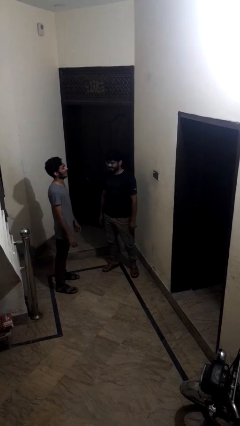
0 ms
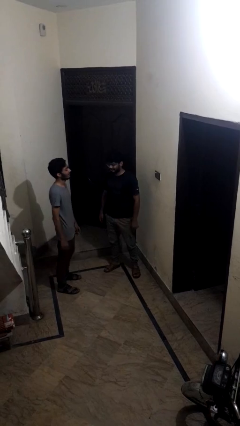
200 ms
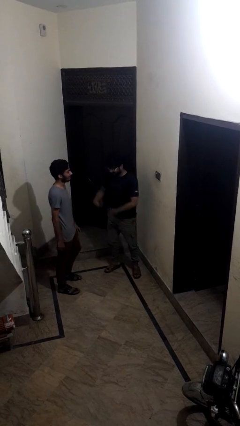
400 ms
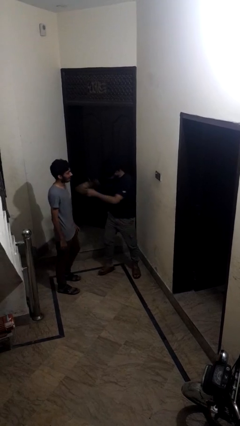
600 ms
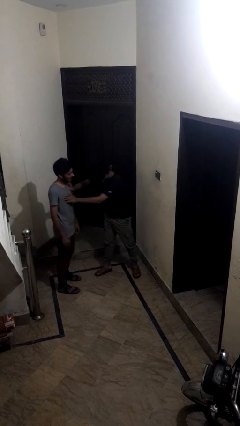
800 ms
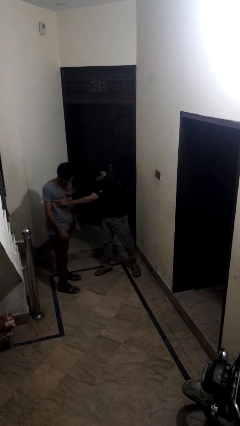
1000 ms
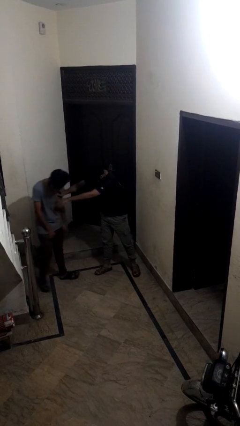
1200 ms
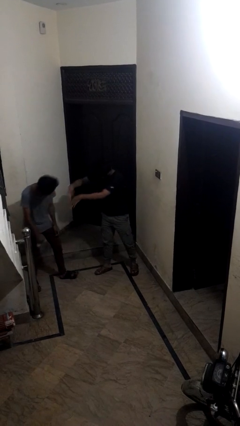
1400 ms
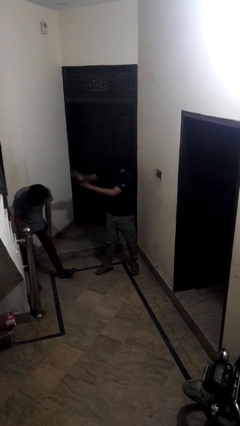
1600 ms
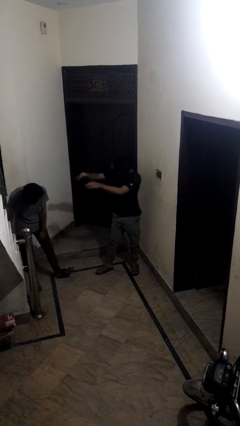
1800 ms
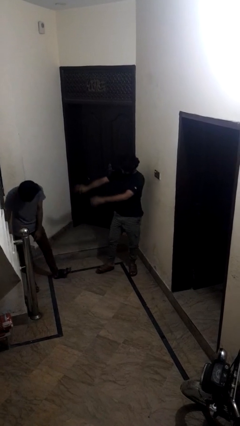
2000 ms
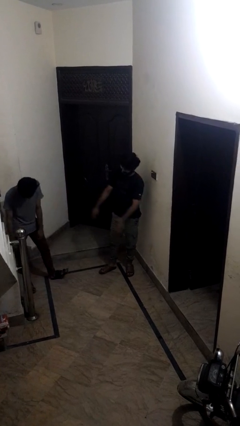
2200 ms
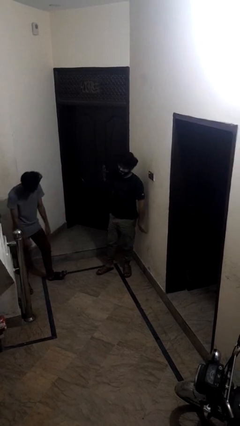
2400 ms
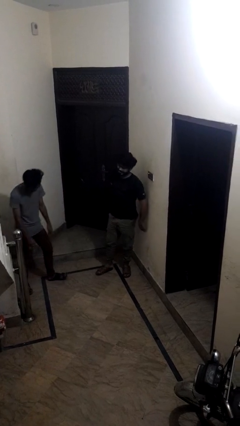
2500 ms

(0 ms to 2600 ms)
person shoves person

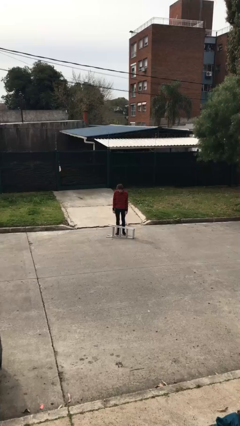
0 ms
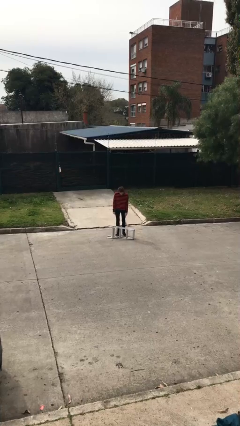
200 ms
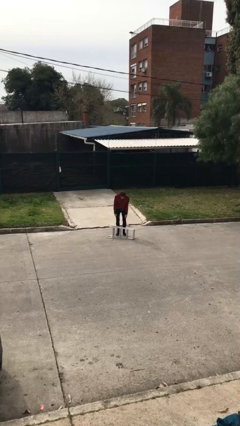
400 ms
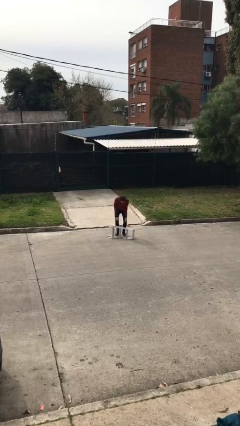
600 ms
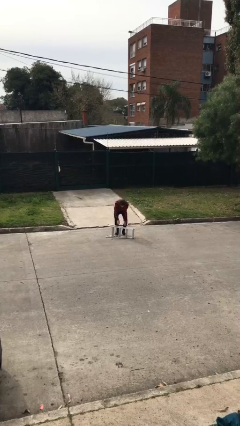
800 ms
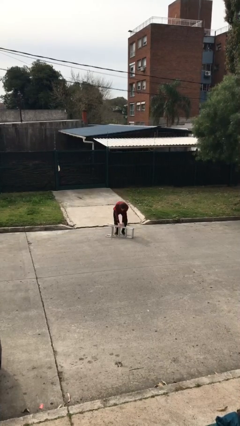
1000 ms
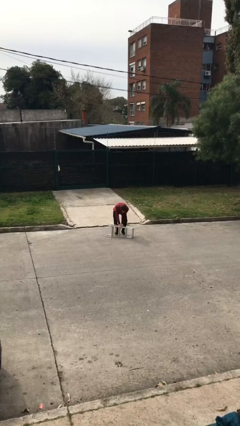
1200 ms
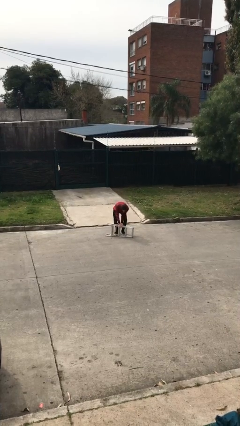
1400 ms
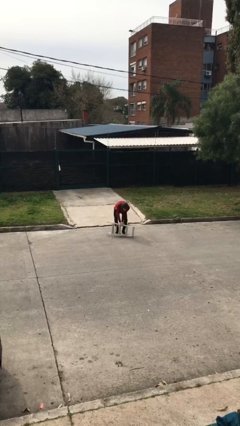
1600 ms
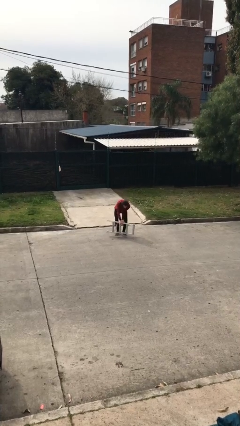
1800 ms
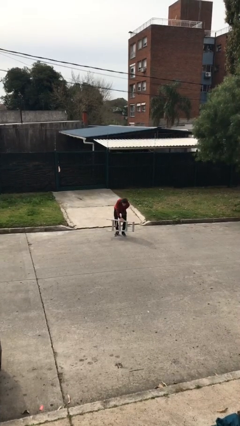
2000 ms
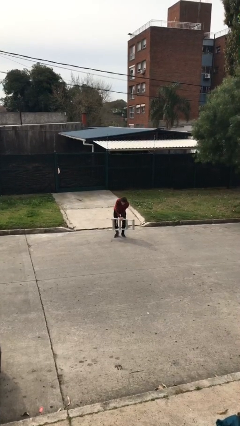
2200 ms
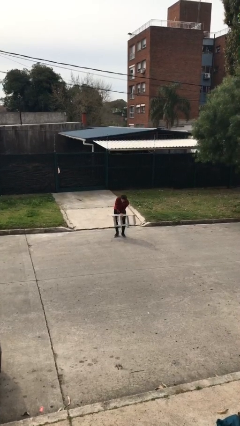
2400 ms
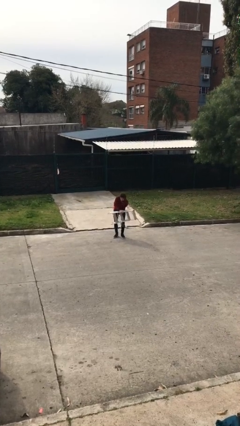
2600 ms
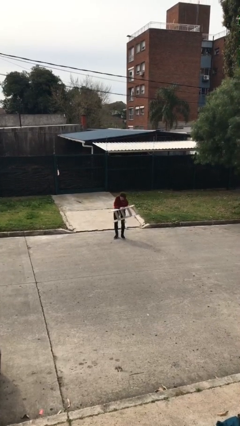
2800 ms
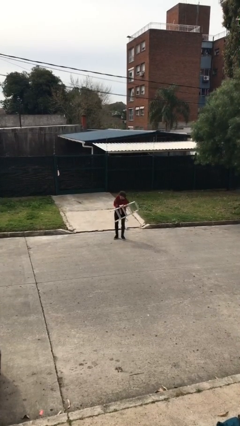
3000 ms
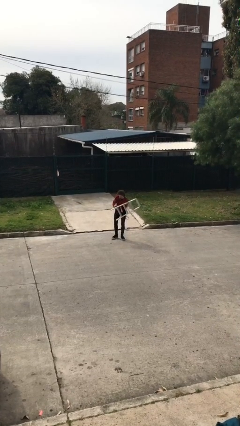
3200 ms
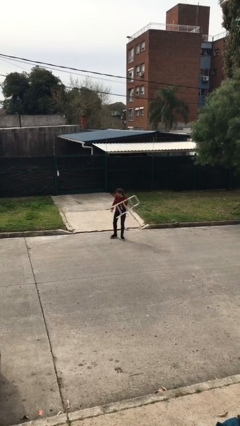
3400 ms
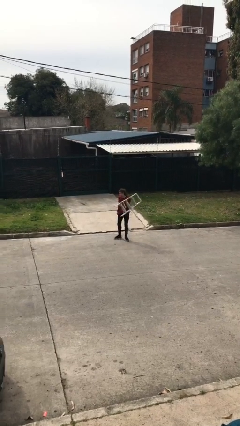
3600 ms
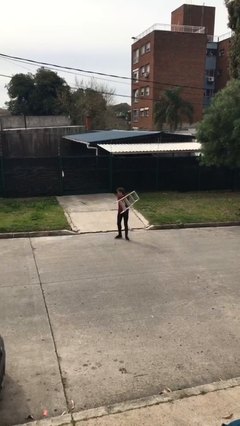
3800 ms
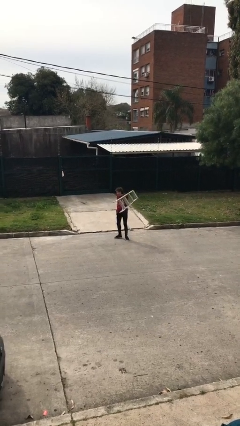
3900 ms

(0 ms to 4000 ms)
person picks up object from floor

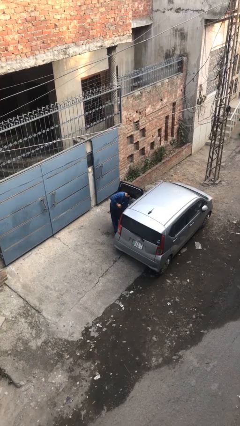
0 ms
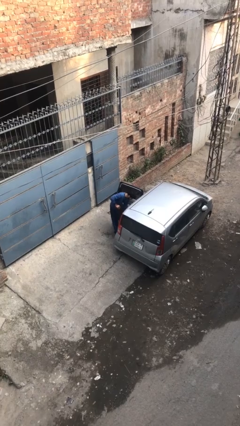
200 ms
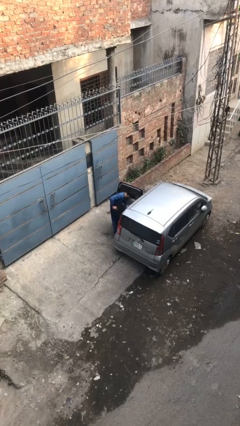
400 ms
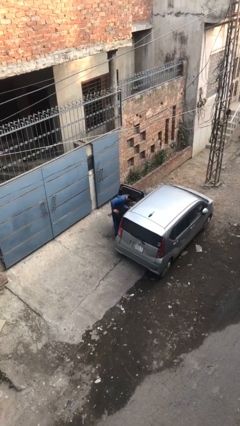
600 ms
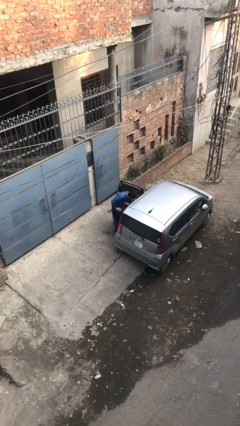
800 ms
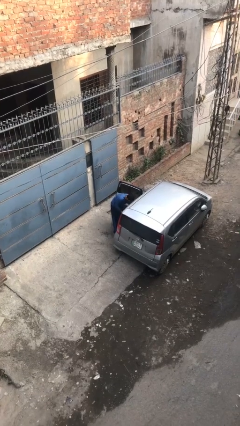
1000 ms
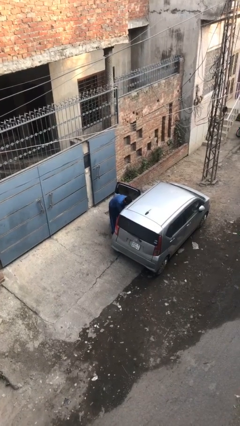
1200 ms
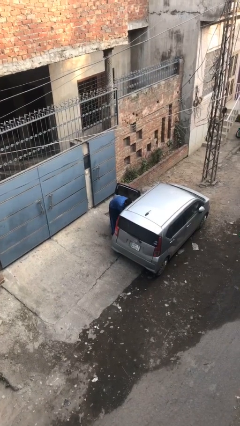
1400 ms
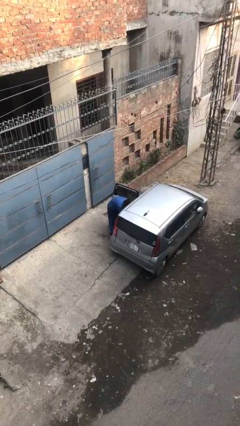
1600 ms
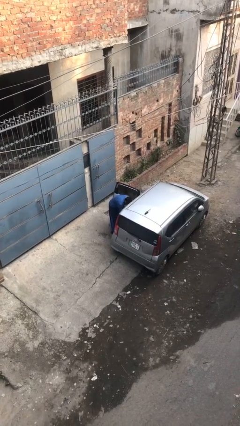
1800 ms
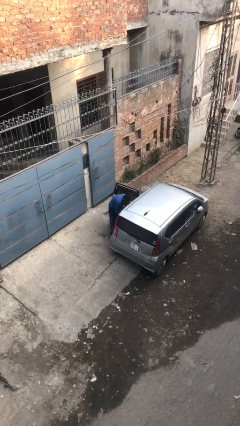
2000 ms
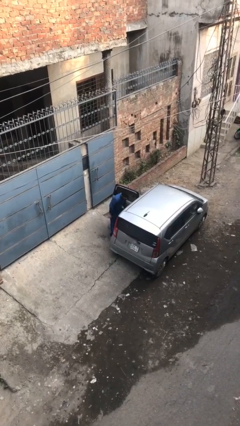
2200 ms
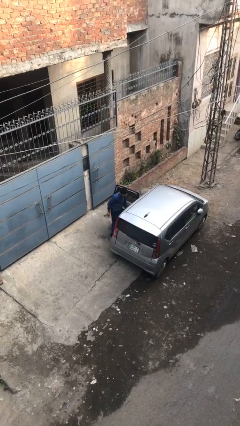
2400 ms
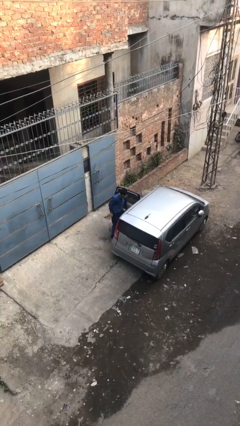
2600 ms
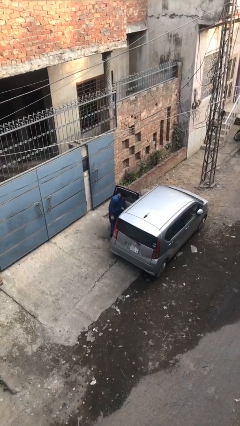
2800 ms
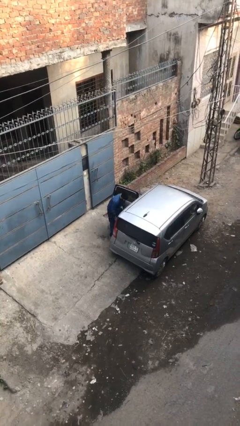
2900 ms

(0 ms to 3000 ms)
person loads car

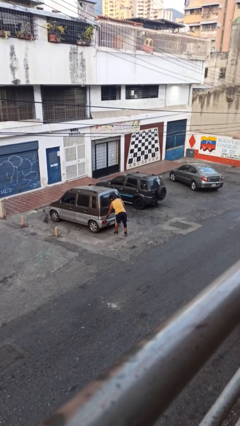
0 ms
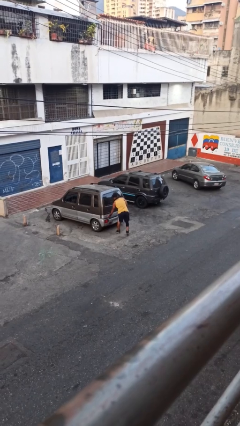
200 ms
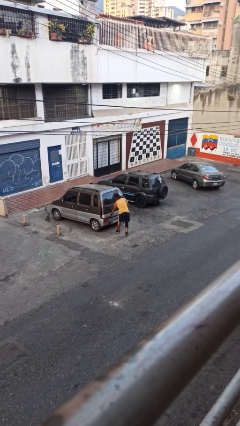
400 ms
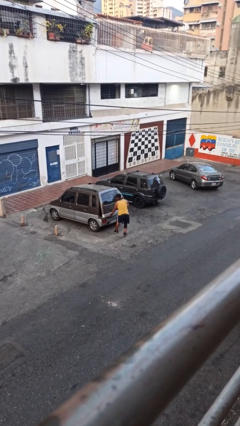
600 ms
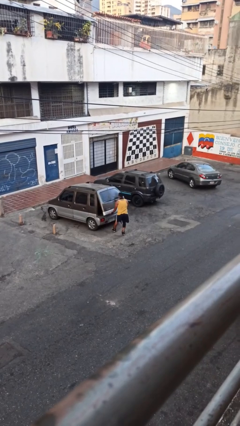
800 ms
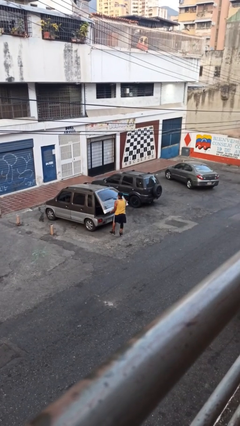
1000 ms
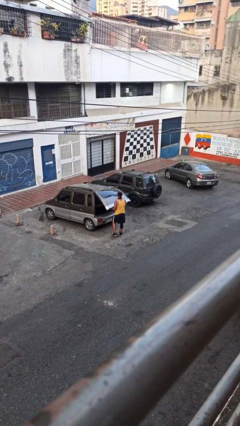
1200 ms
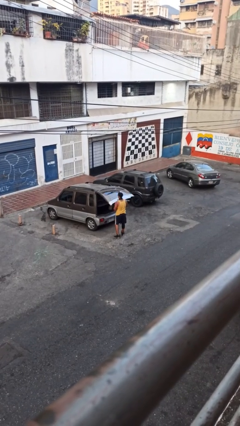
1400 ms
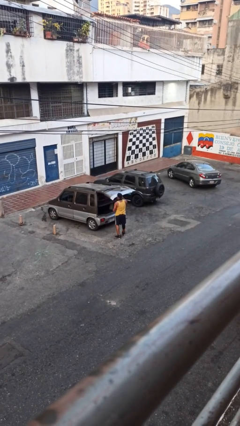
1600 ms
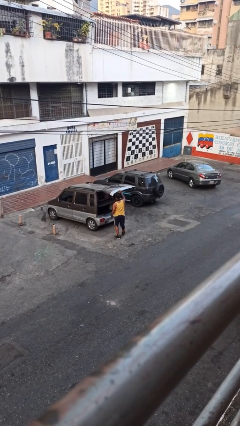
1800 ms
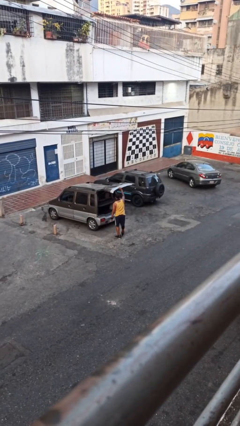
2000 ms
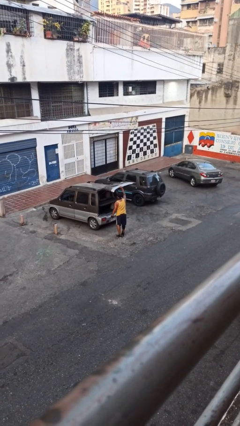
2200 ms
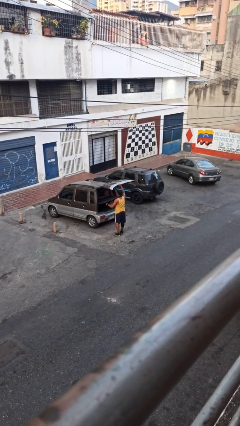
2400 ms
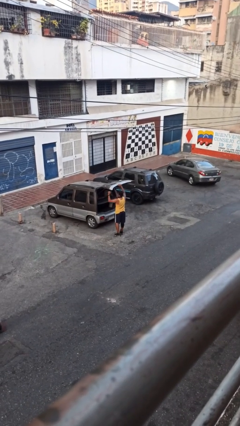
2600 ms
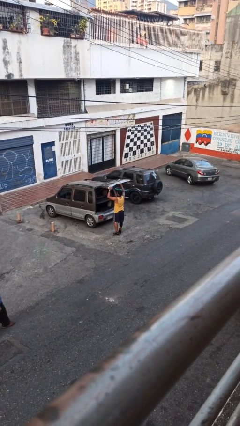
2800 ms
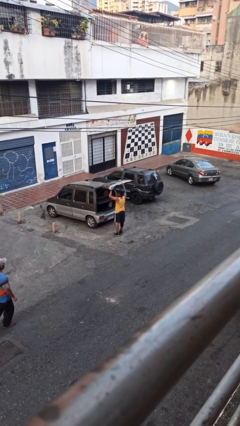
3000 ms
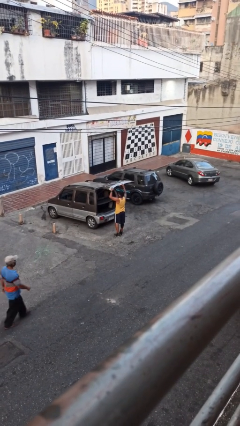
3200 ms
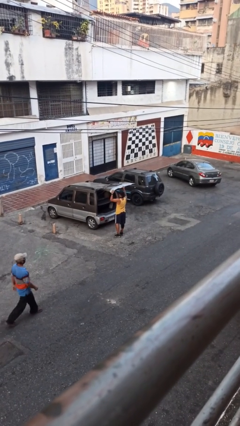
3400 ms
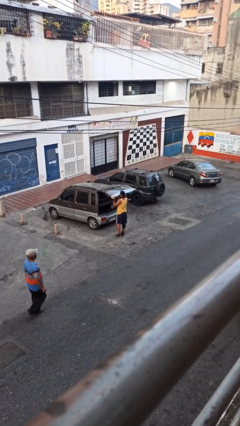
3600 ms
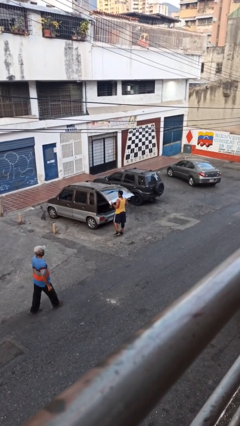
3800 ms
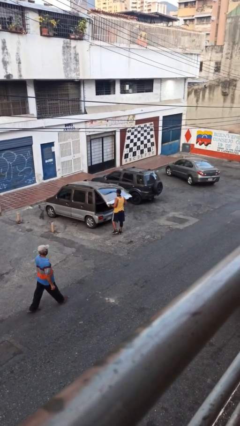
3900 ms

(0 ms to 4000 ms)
person opens car trunk

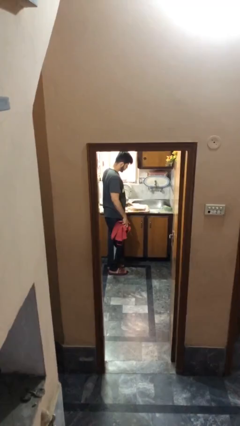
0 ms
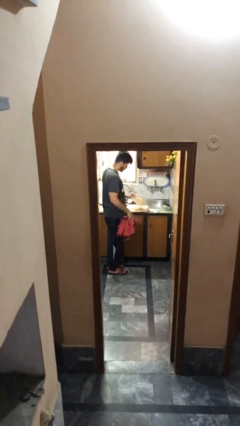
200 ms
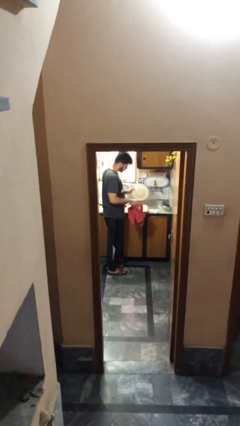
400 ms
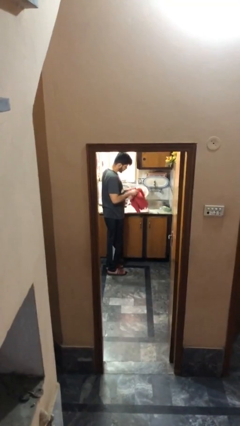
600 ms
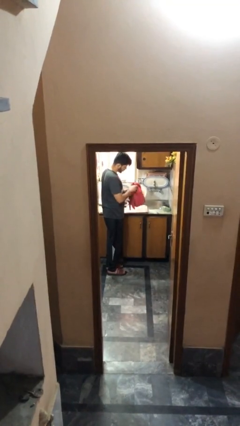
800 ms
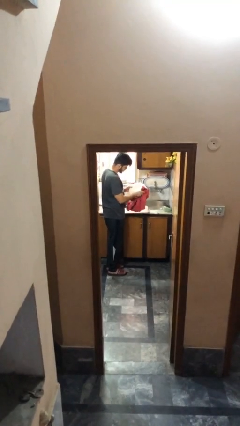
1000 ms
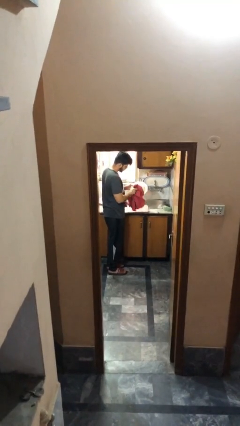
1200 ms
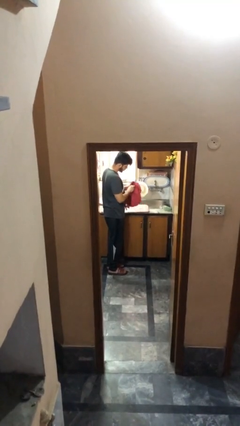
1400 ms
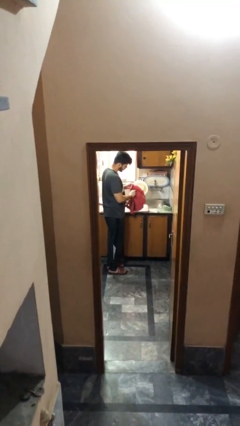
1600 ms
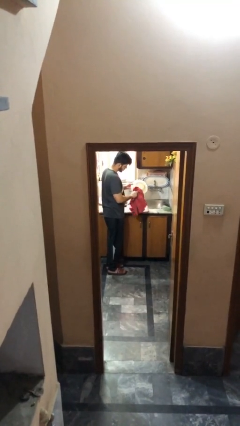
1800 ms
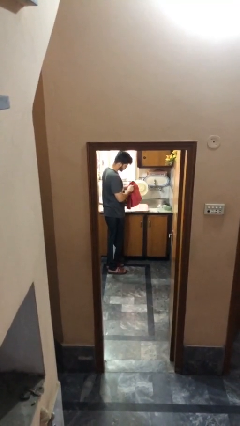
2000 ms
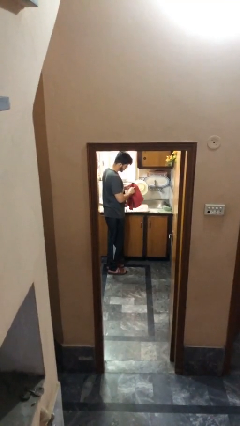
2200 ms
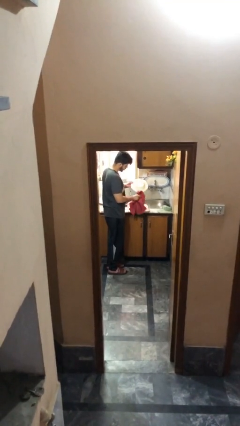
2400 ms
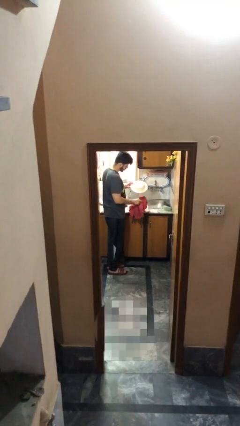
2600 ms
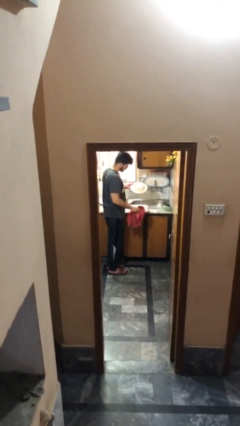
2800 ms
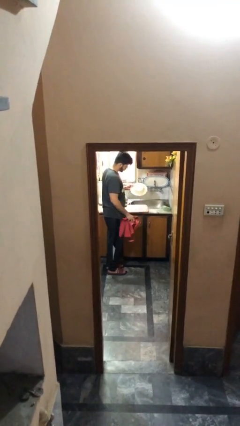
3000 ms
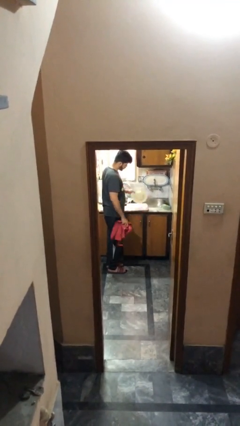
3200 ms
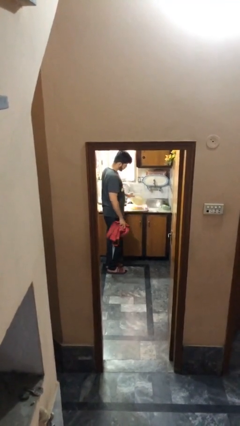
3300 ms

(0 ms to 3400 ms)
person dries dish

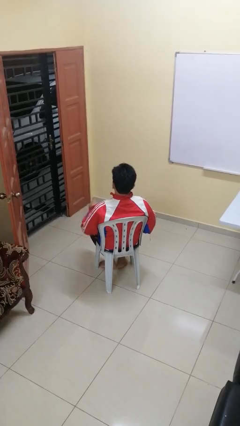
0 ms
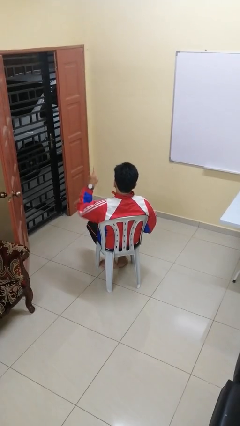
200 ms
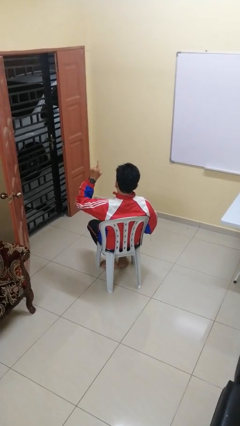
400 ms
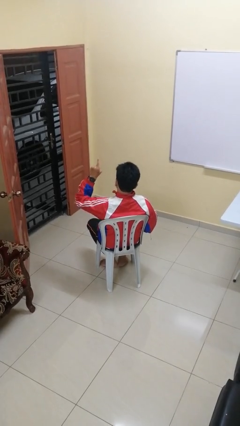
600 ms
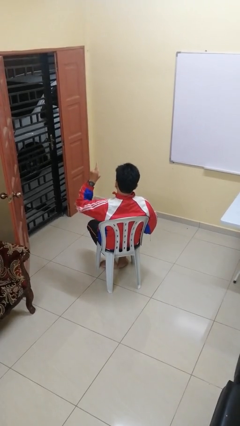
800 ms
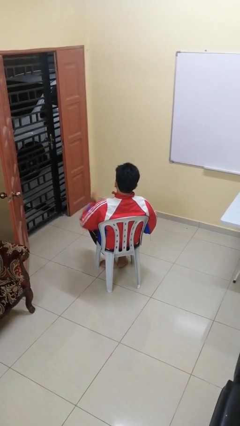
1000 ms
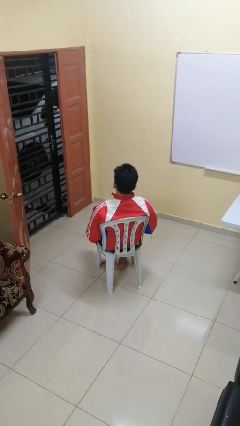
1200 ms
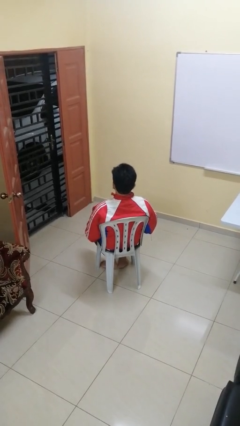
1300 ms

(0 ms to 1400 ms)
person gestures number one
